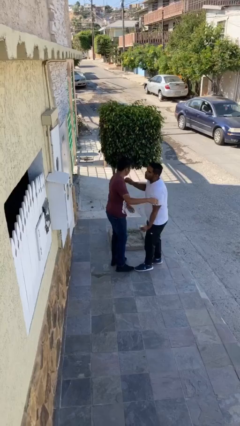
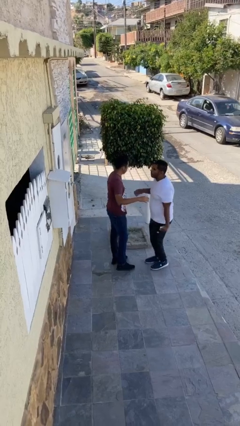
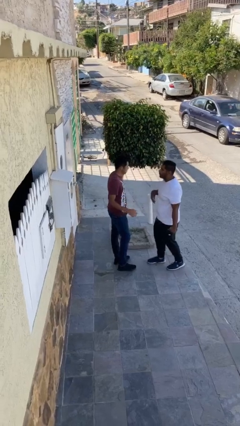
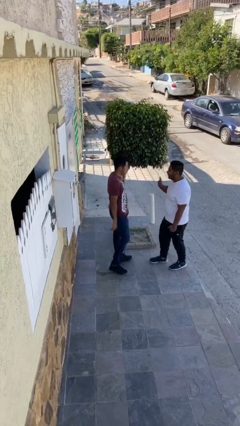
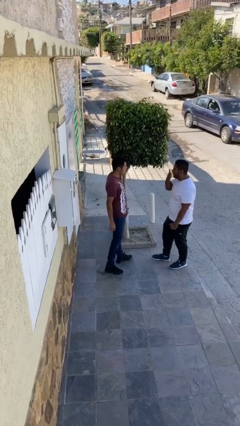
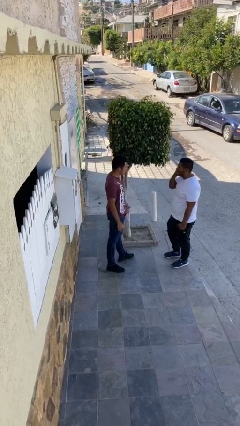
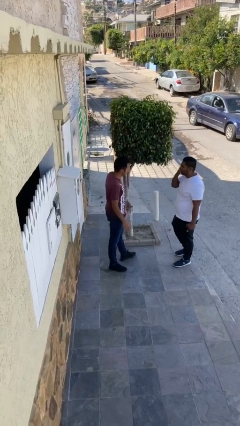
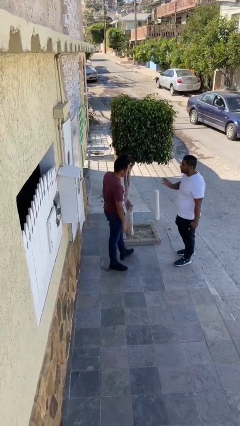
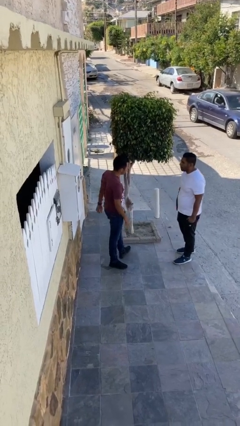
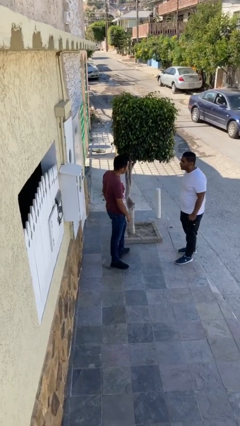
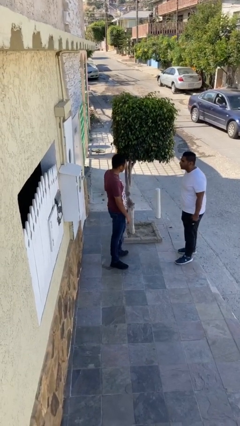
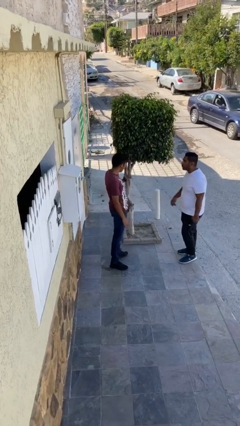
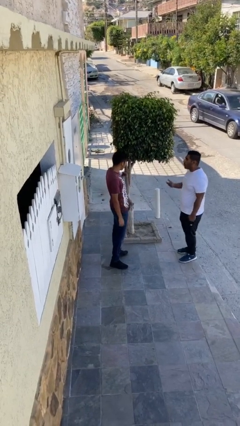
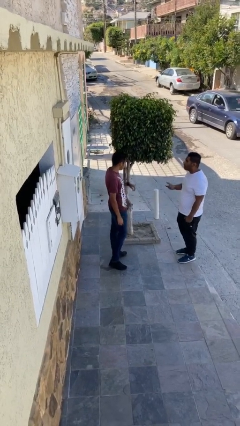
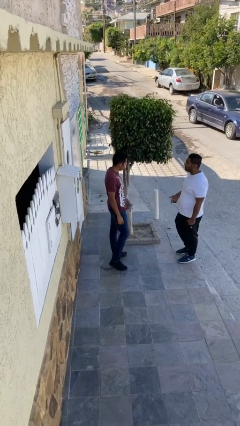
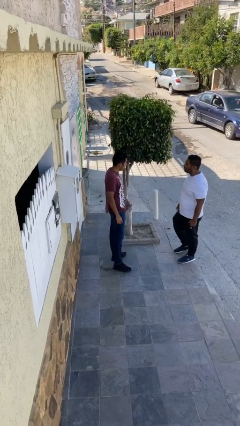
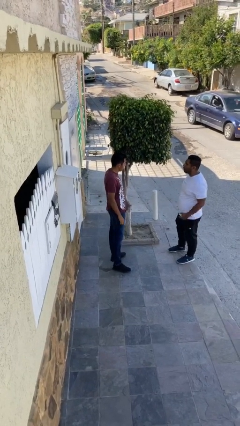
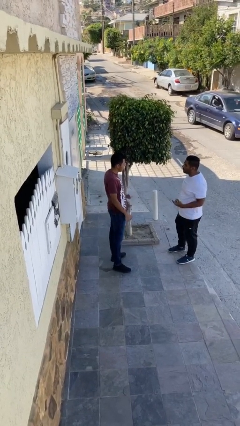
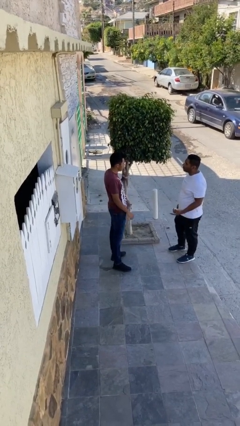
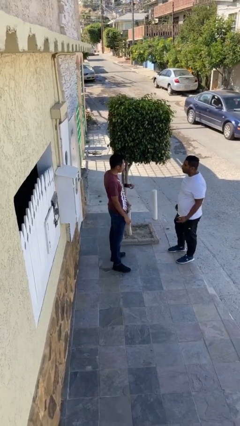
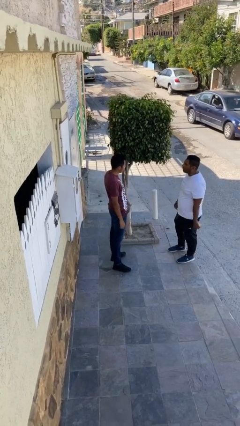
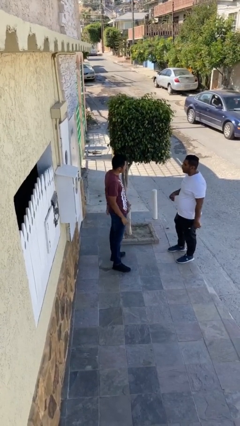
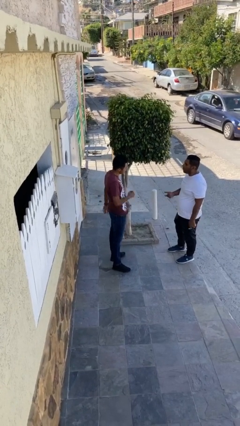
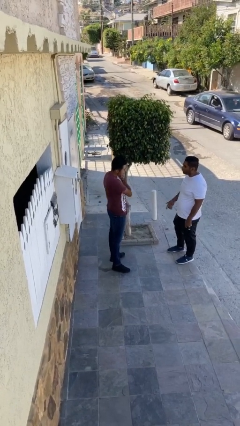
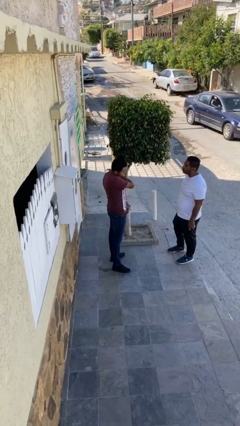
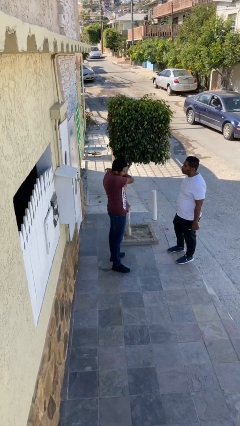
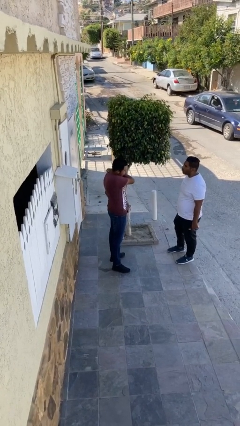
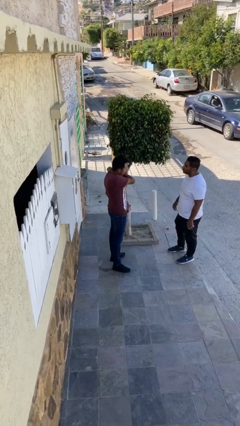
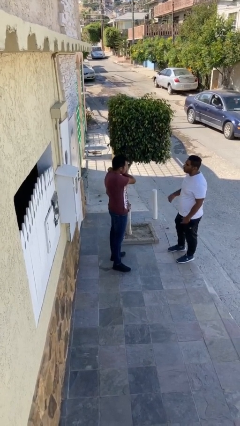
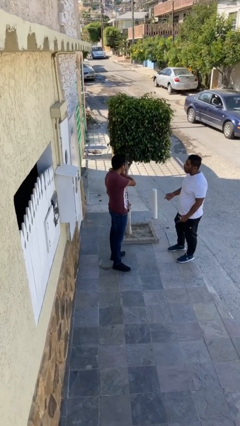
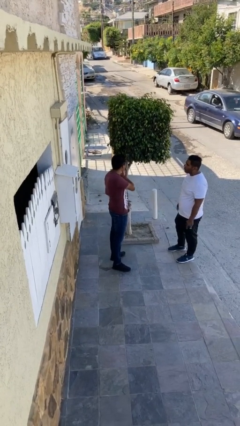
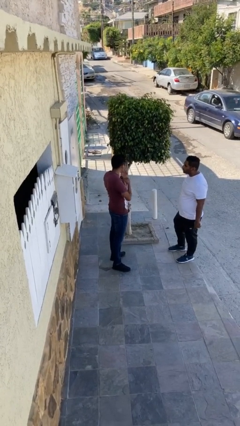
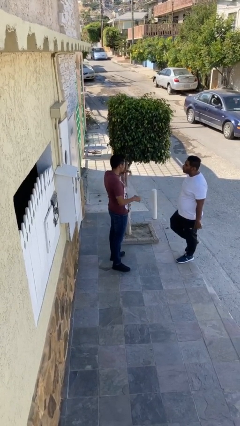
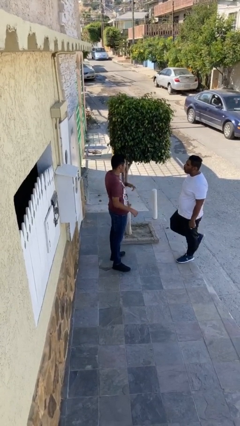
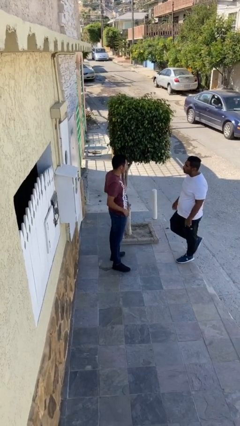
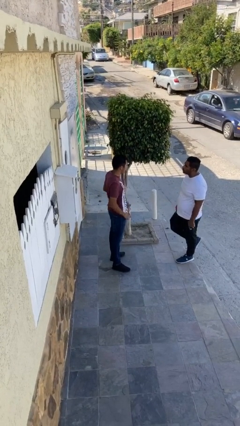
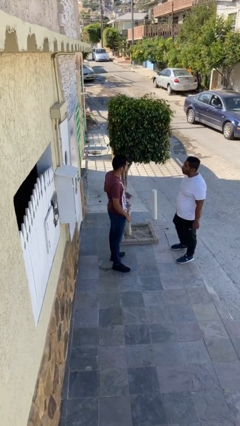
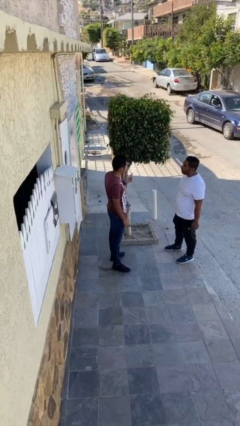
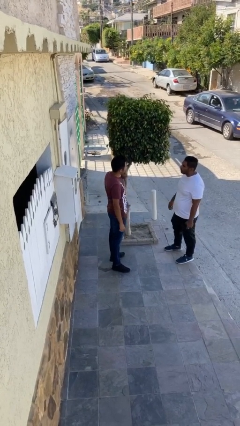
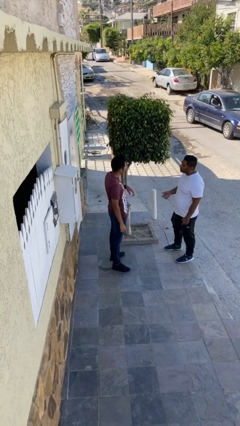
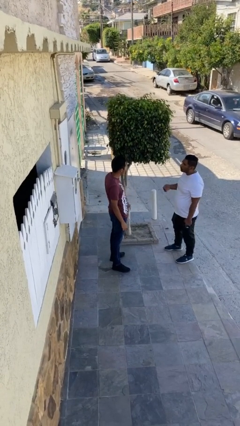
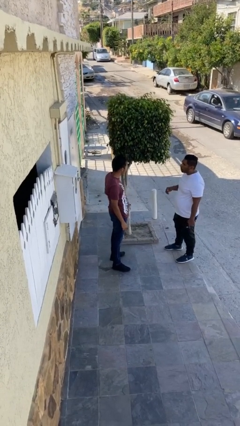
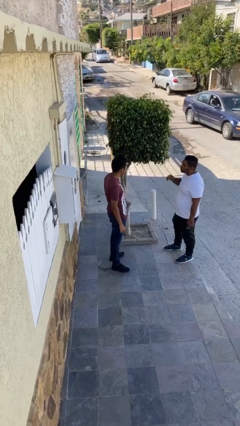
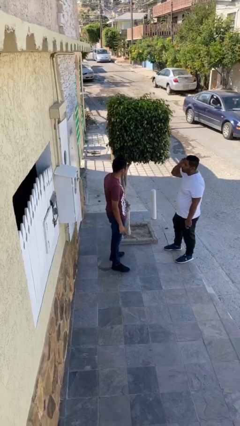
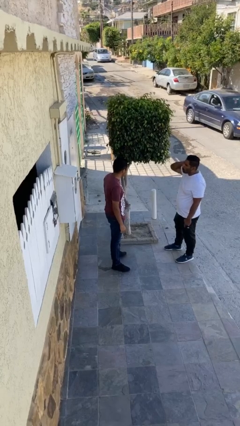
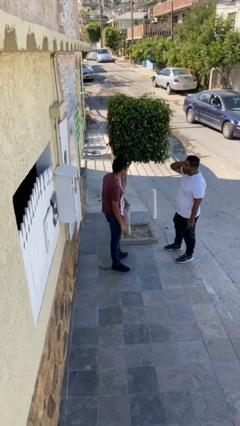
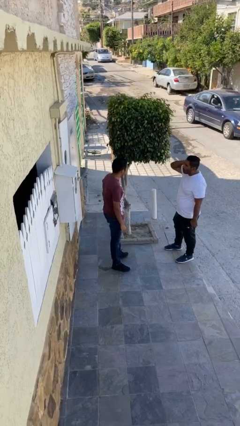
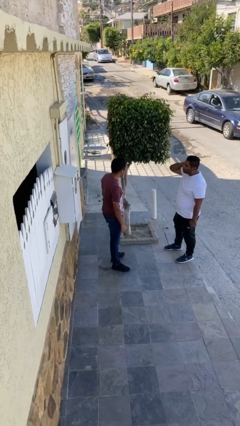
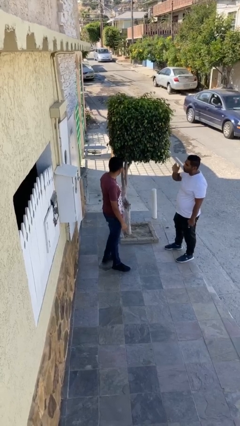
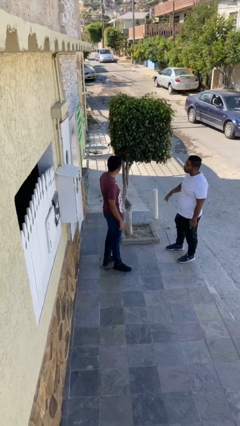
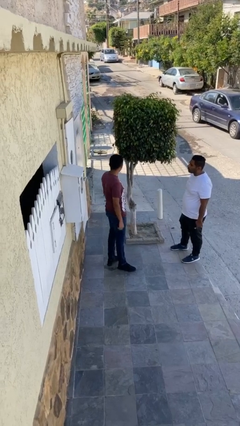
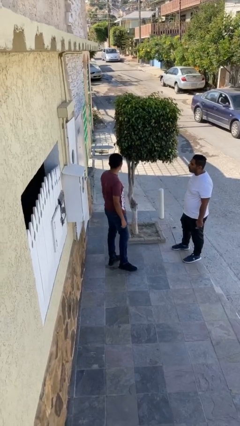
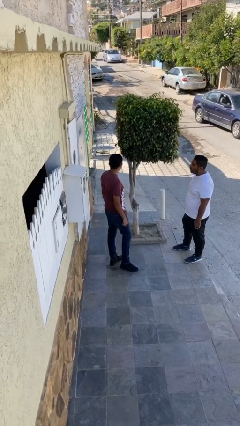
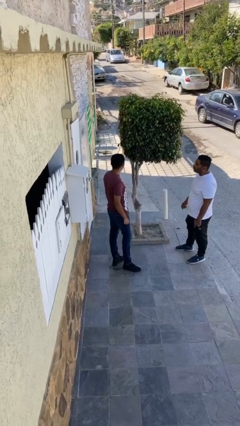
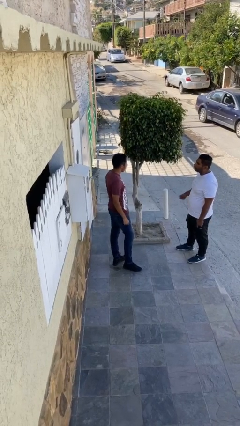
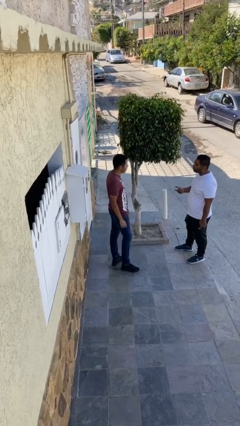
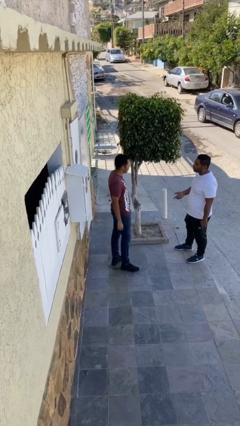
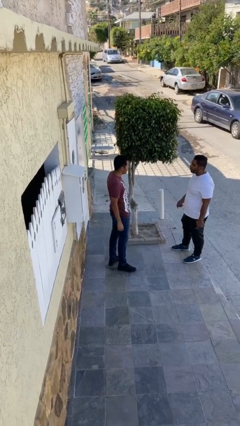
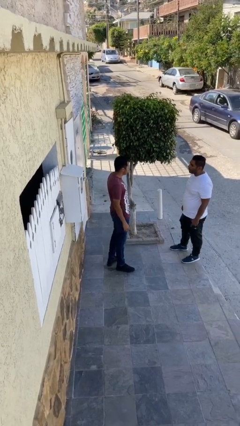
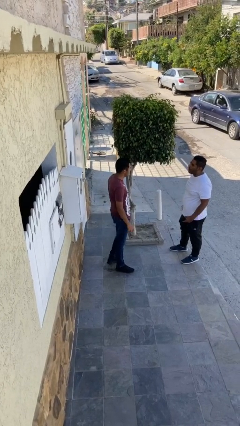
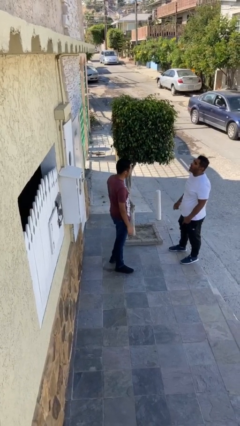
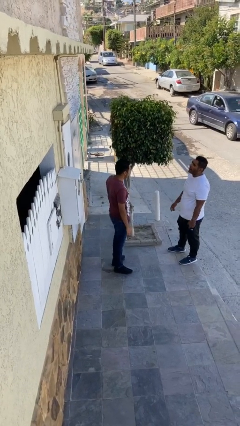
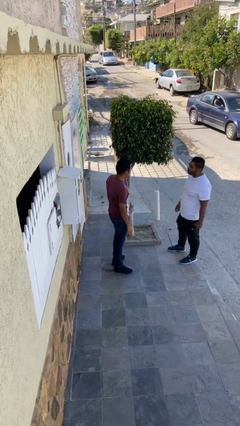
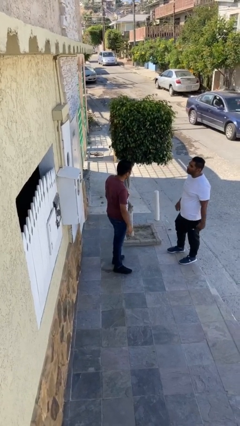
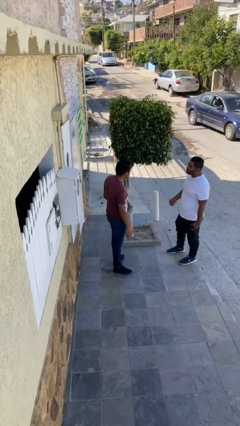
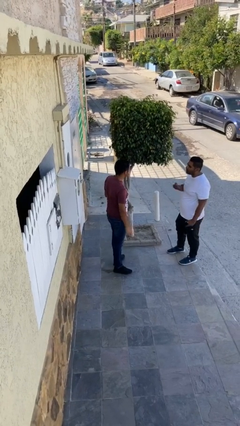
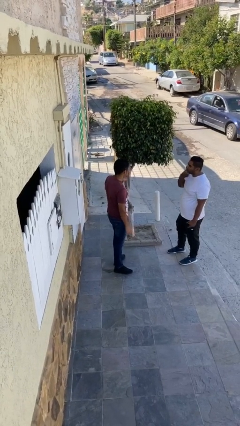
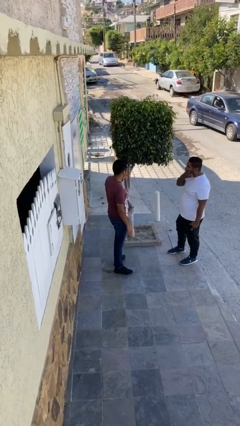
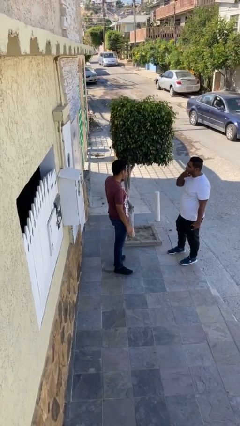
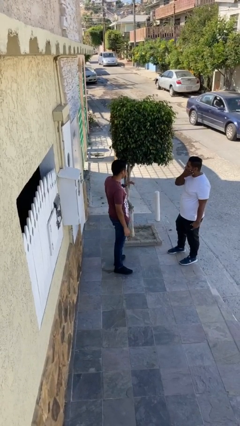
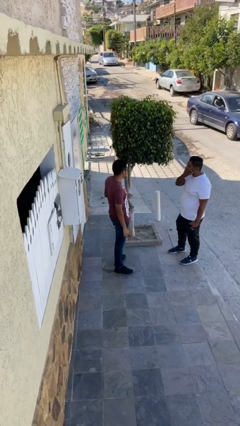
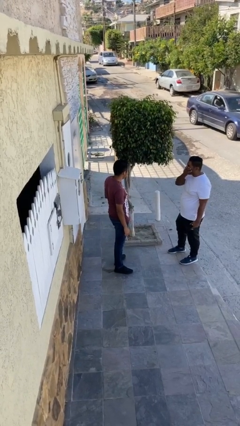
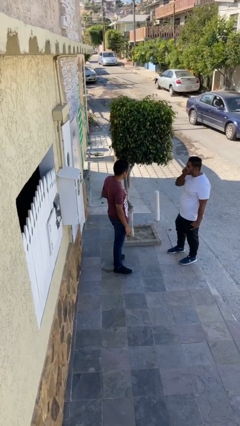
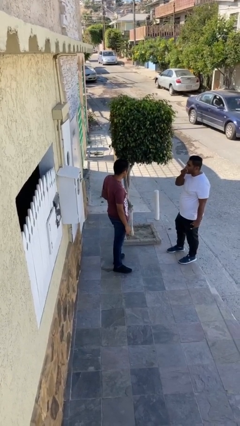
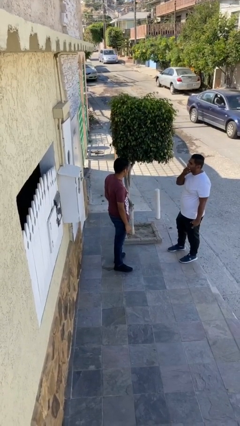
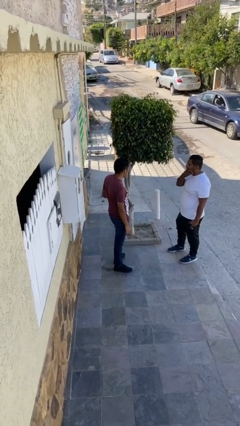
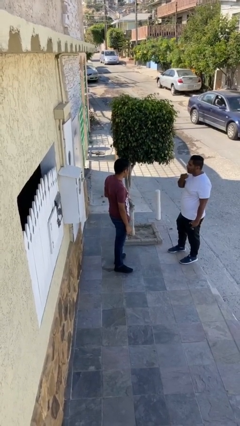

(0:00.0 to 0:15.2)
person talks to person

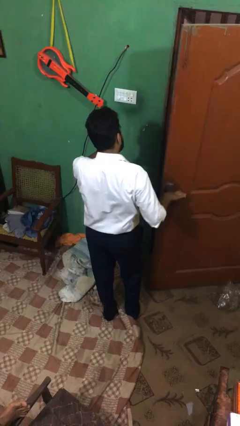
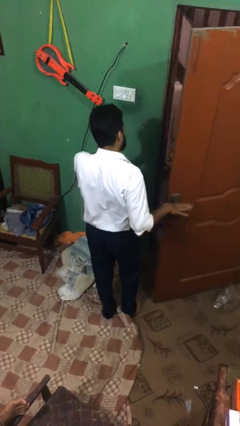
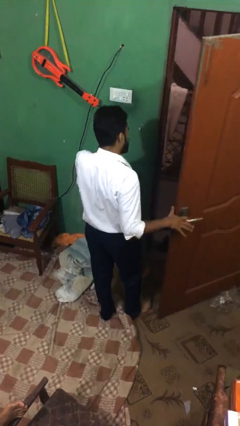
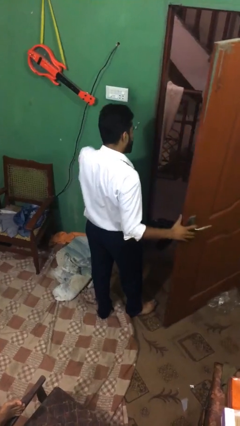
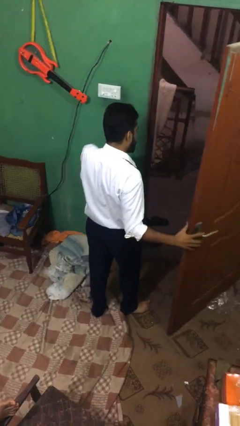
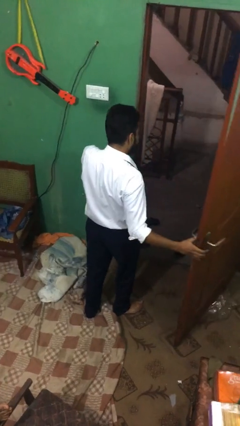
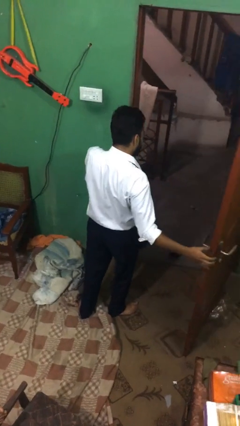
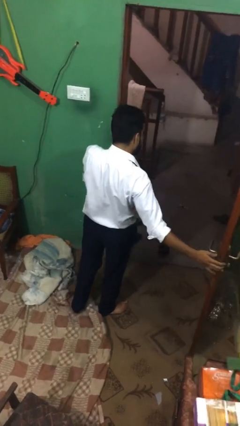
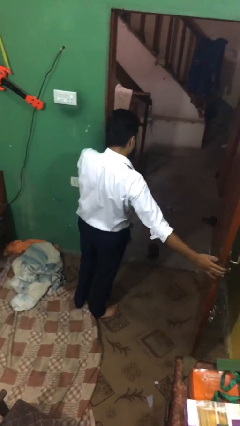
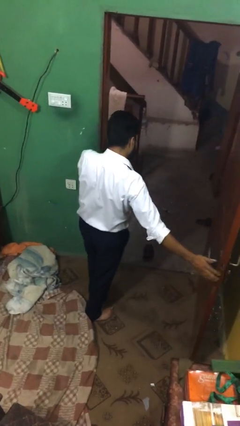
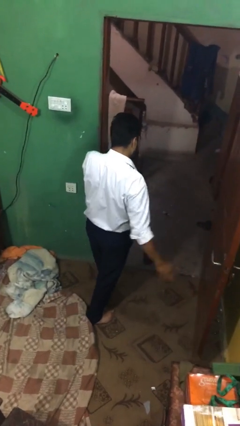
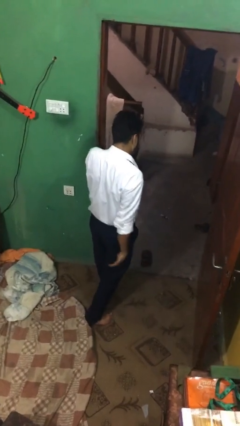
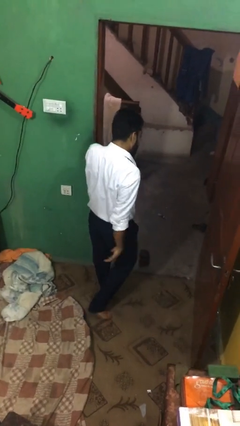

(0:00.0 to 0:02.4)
person opens facility door

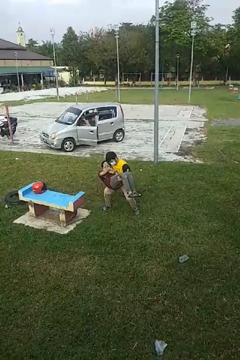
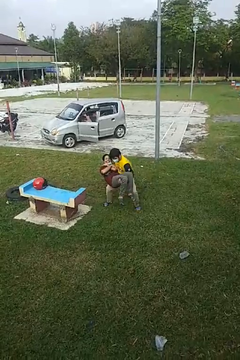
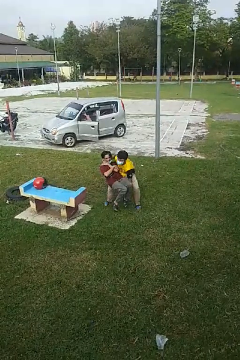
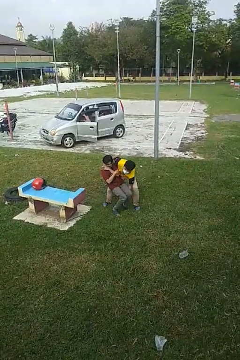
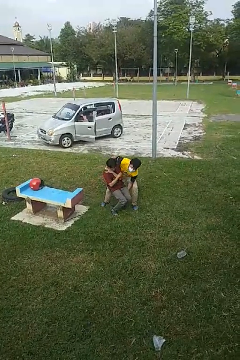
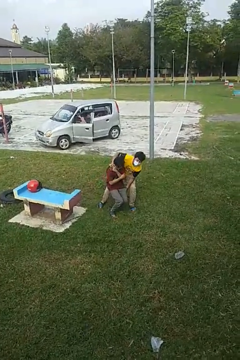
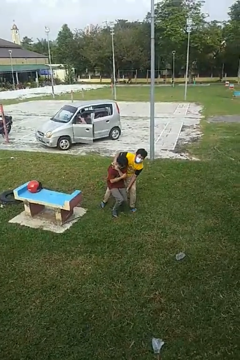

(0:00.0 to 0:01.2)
person puts down person
